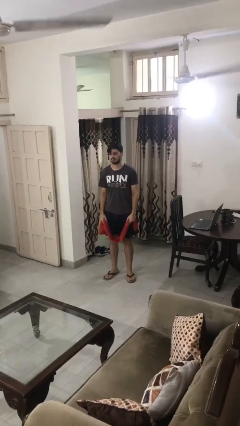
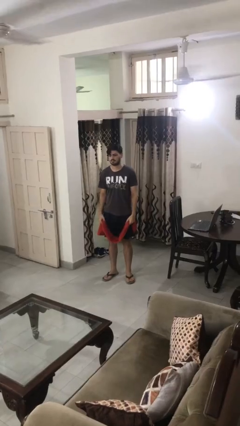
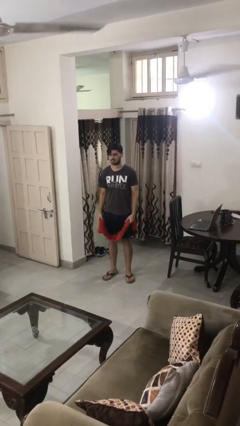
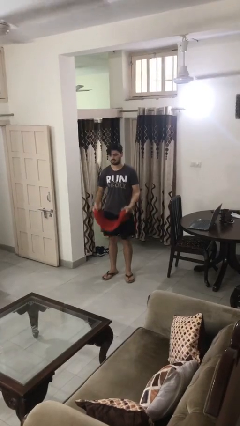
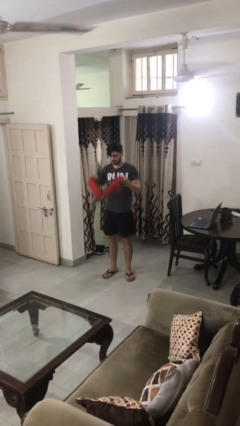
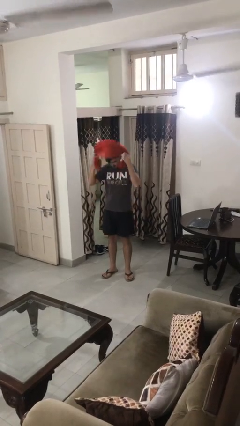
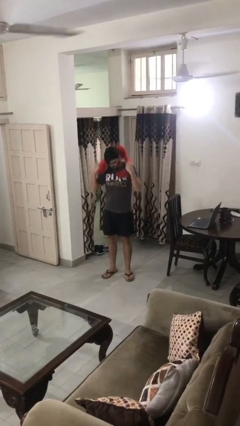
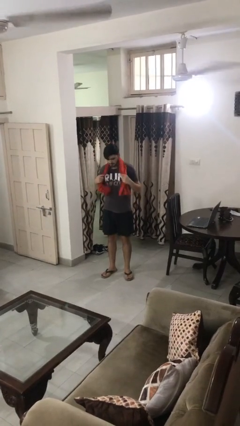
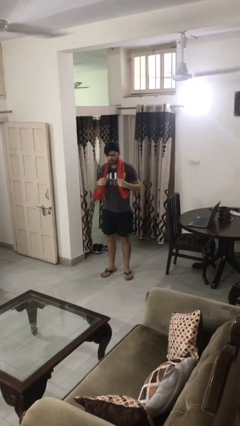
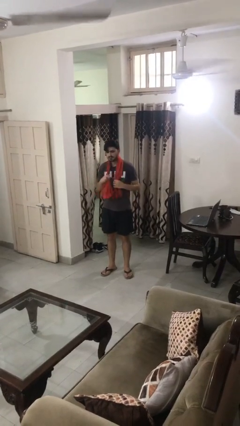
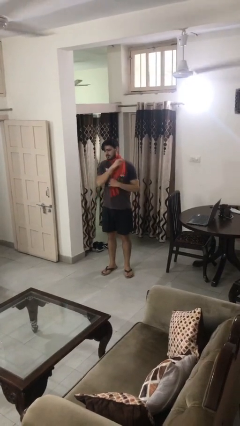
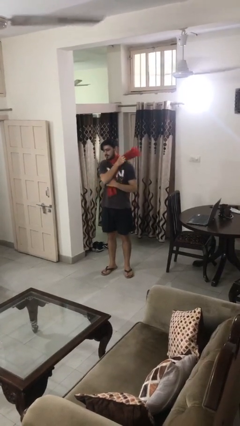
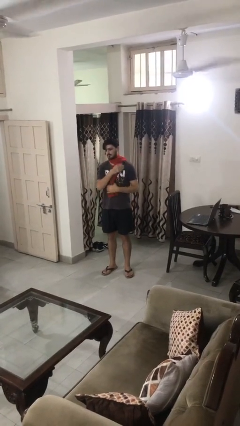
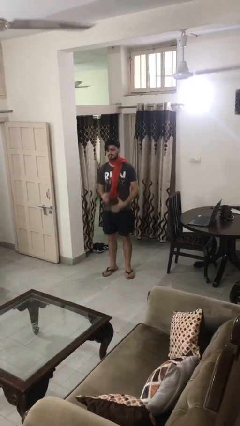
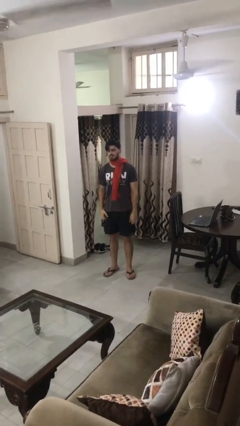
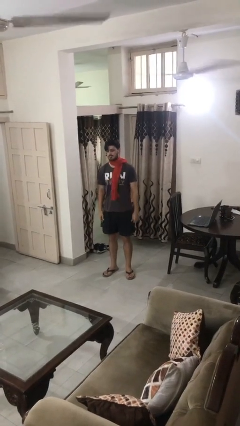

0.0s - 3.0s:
person puts on scarf

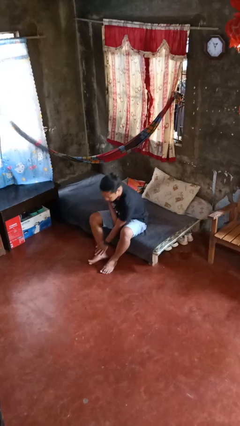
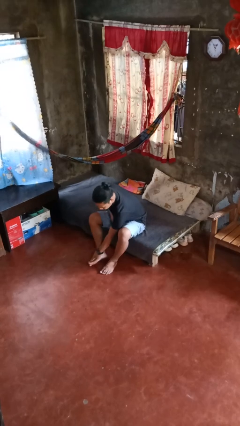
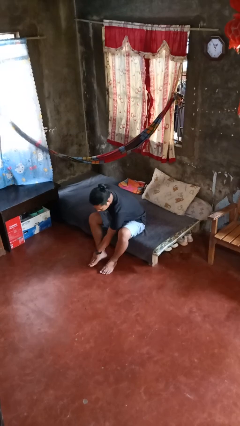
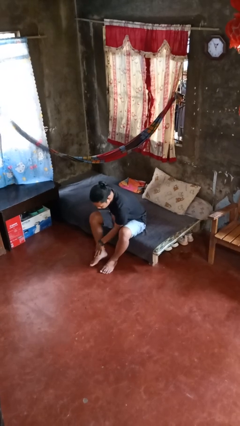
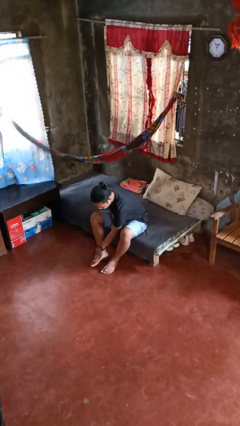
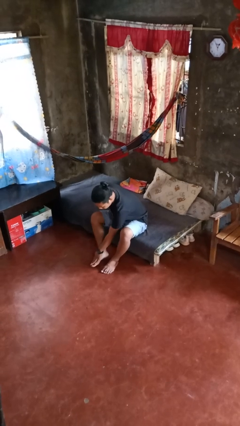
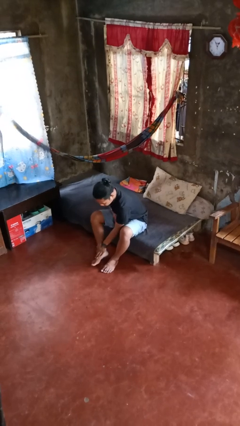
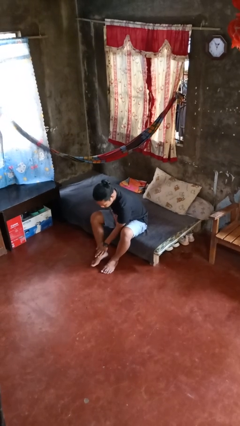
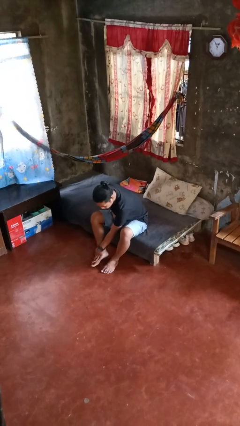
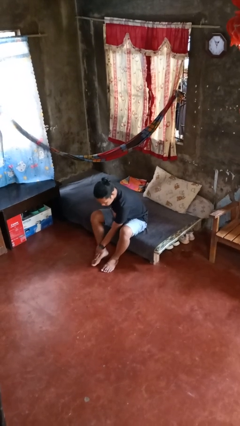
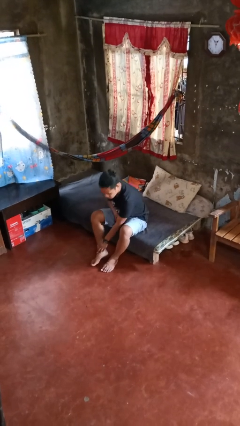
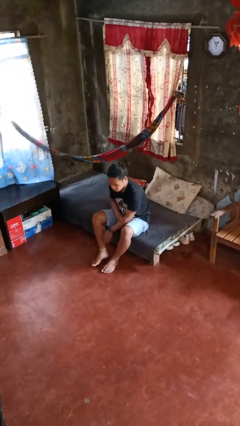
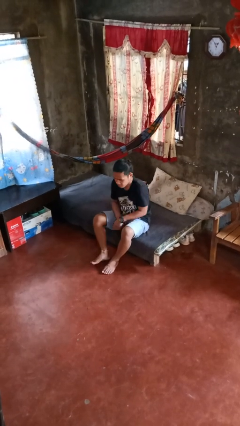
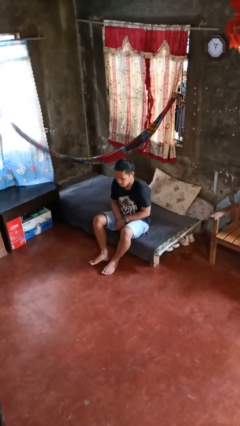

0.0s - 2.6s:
person rubs foot

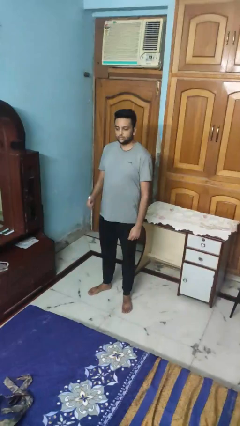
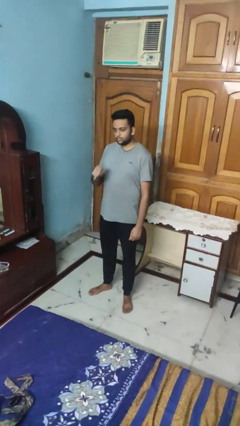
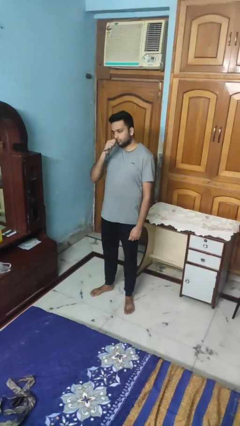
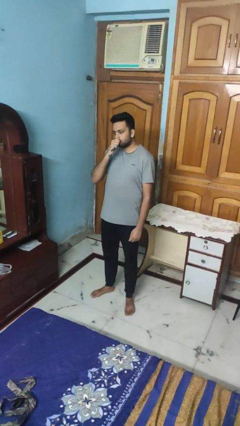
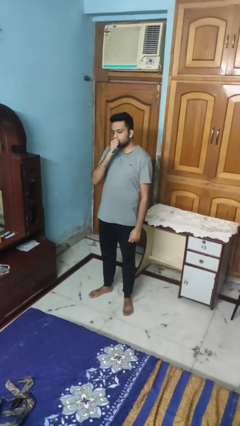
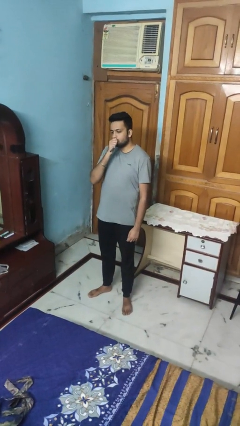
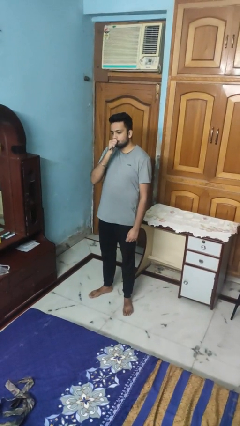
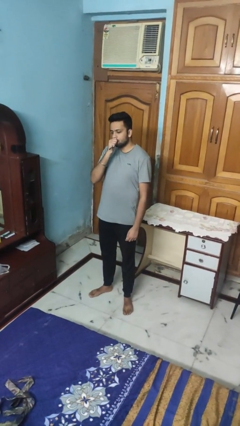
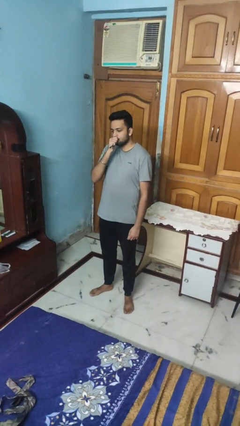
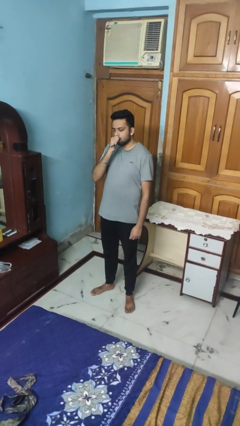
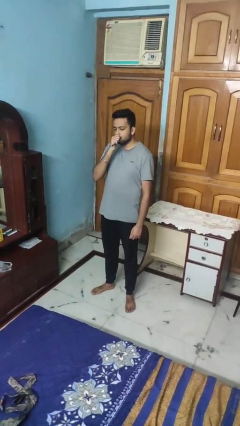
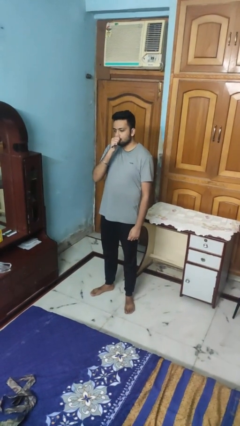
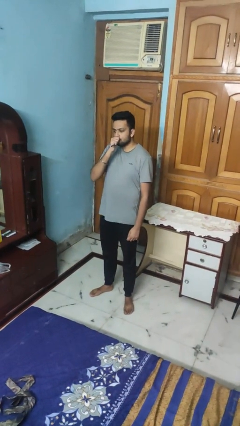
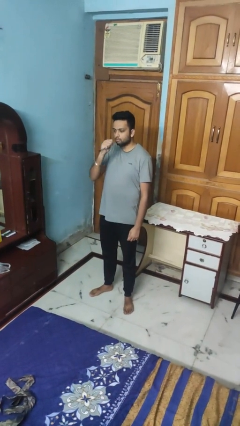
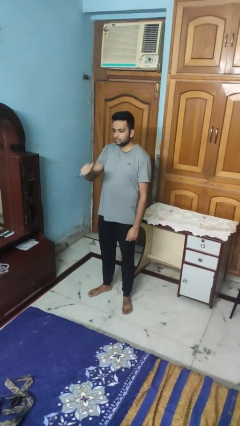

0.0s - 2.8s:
person vapes

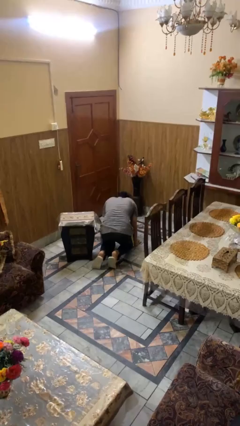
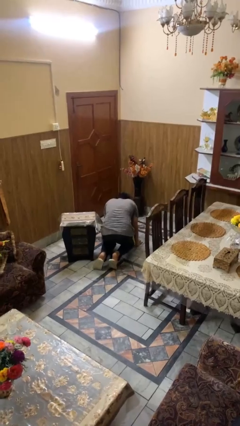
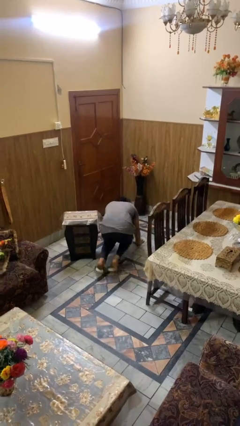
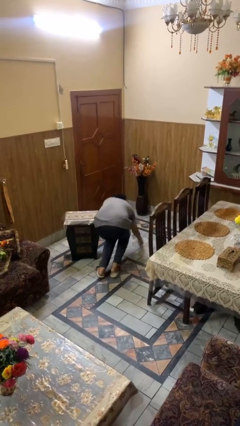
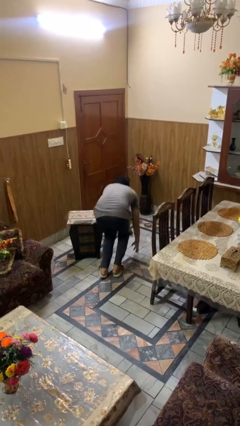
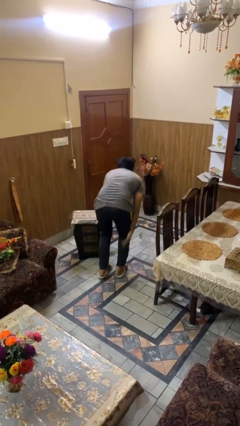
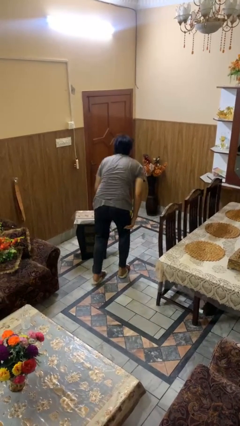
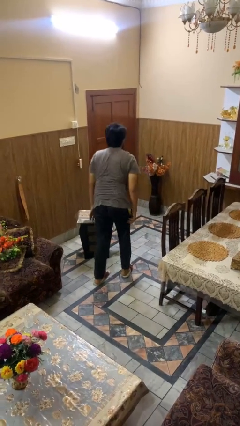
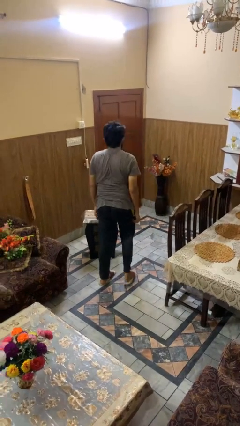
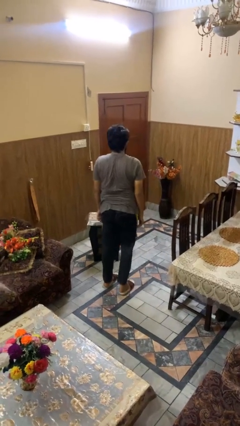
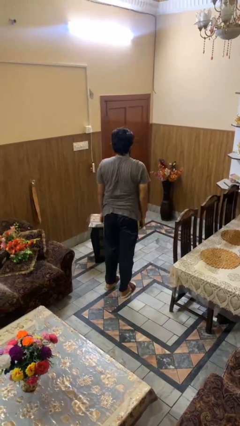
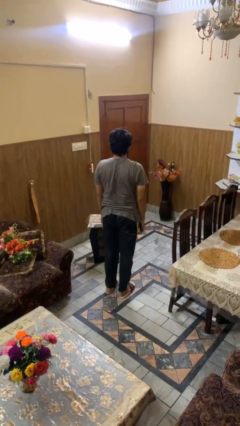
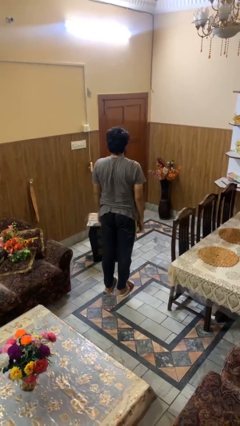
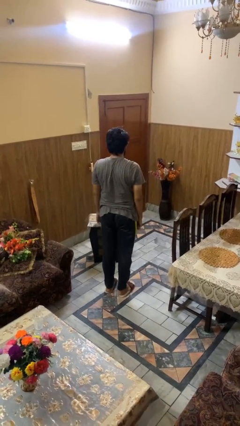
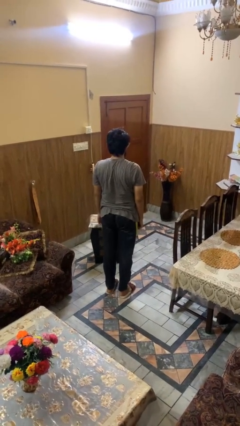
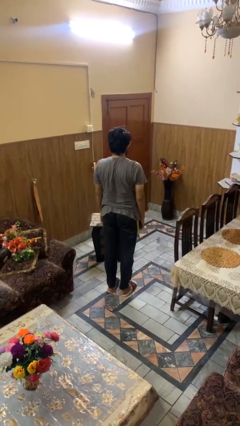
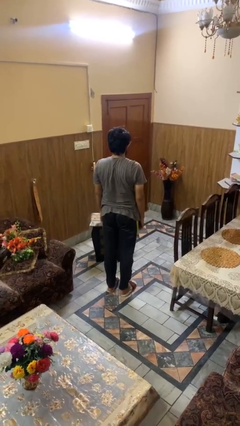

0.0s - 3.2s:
person stands up from floor

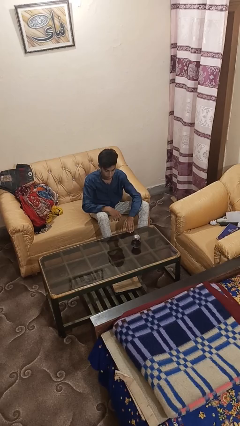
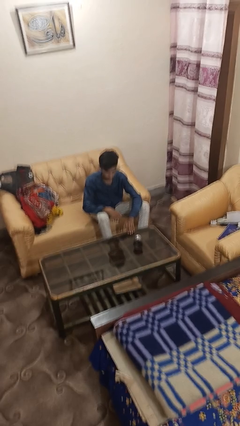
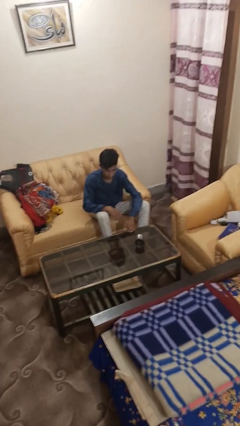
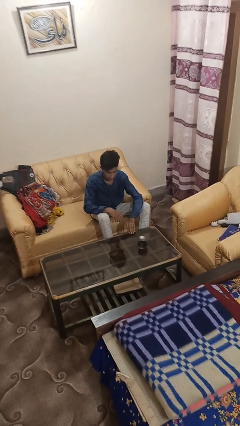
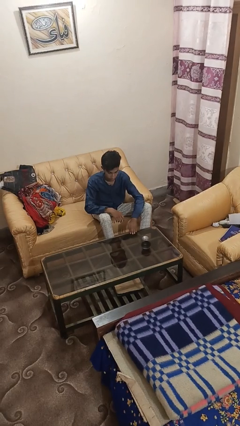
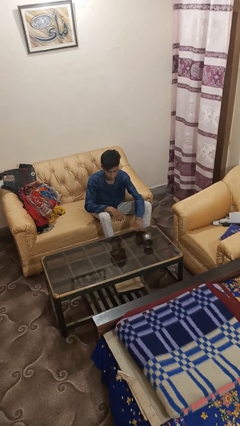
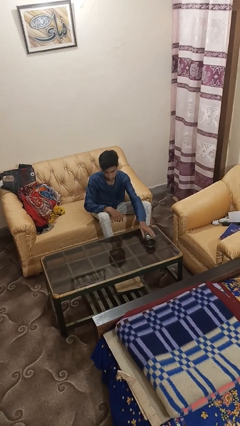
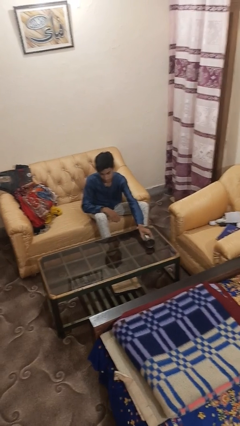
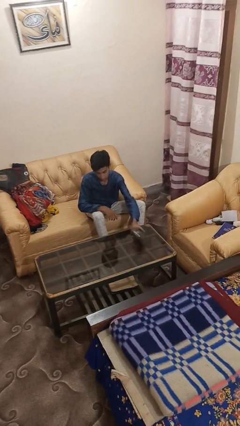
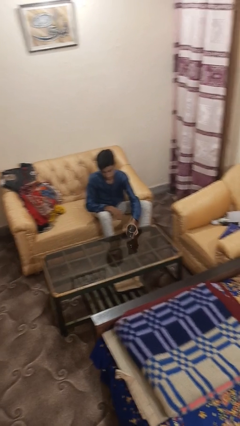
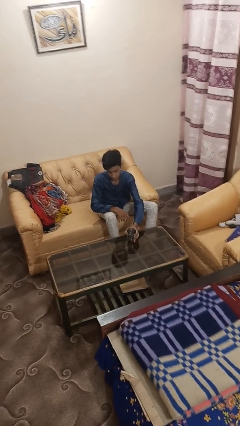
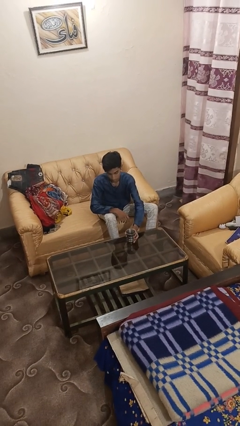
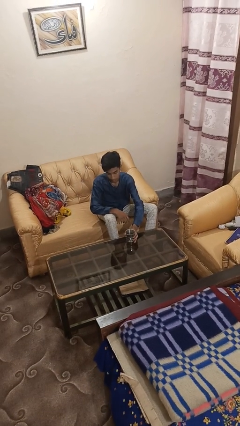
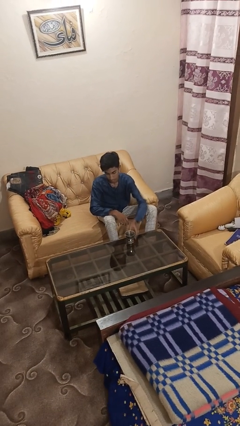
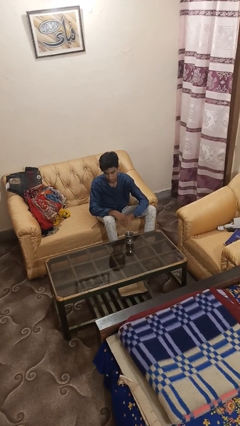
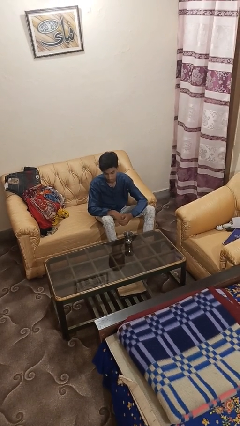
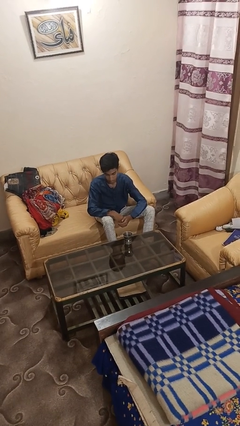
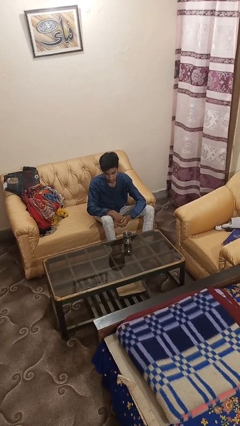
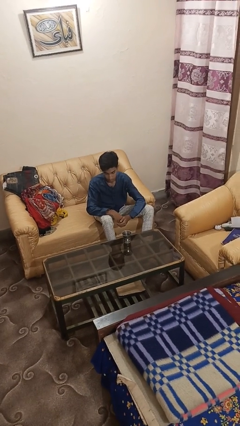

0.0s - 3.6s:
person sets upright glass

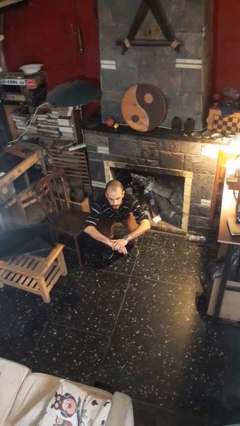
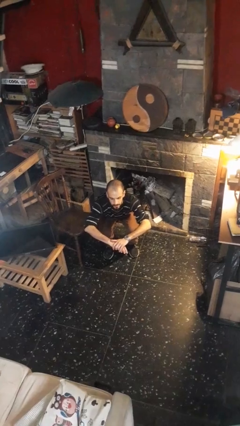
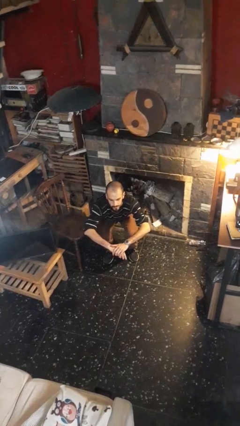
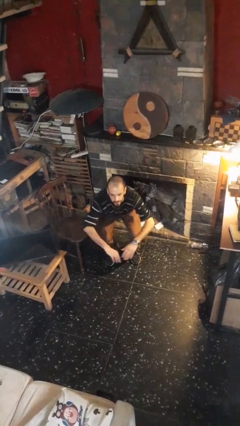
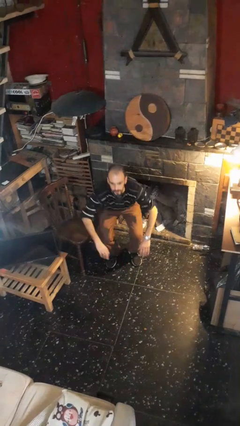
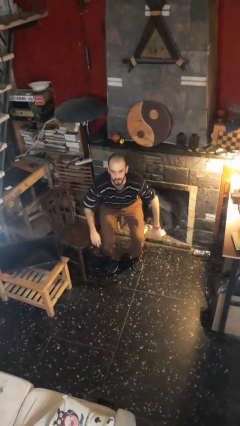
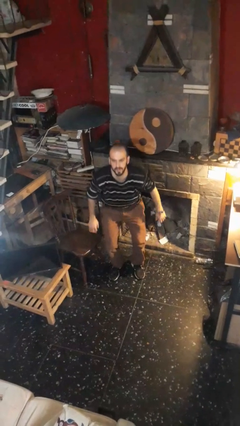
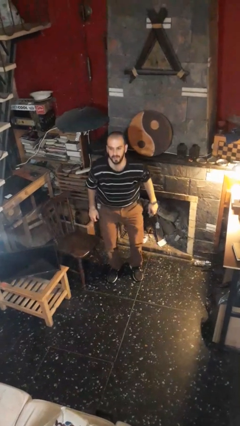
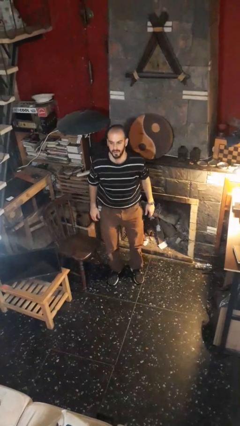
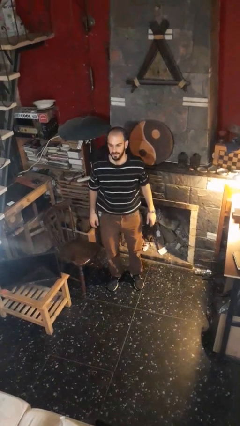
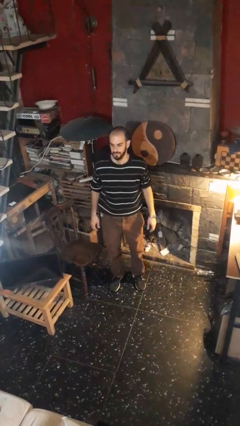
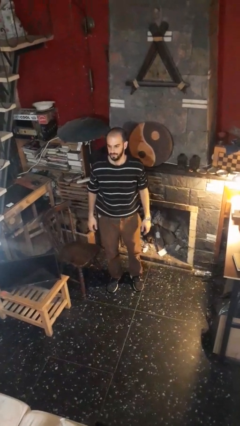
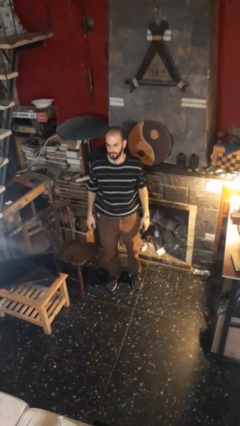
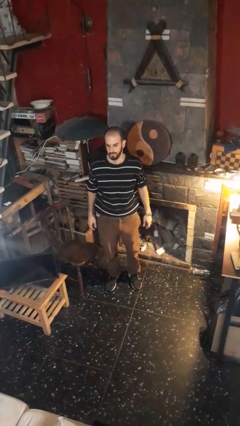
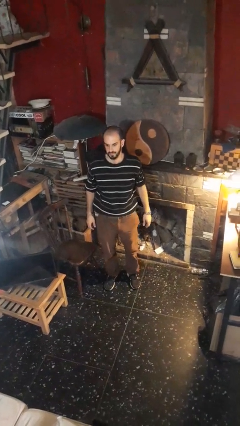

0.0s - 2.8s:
person stands up
